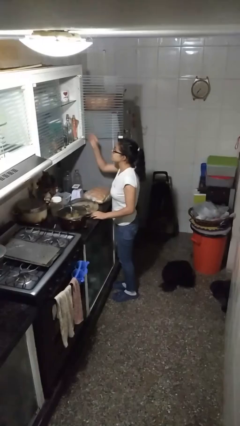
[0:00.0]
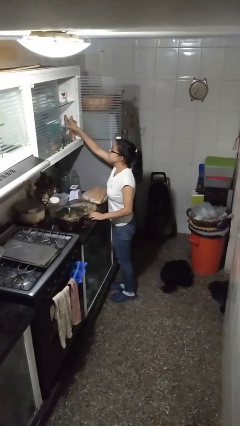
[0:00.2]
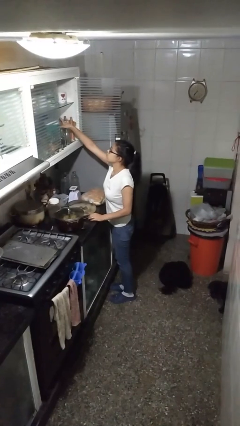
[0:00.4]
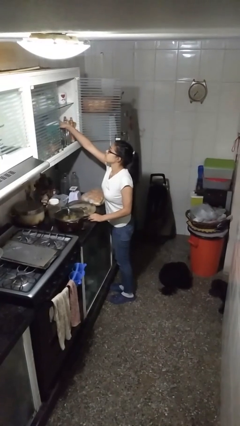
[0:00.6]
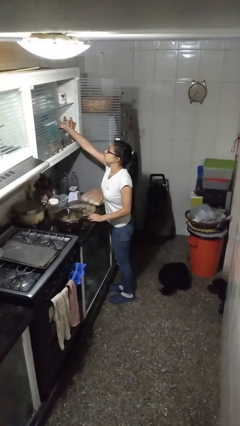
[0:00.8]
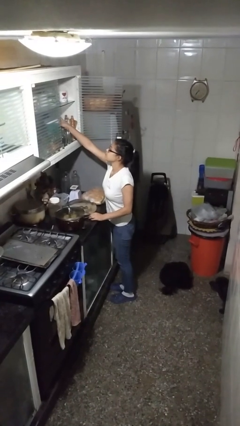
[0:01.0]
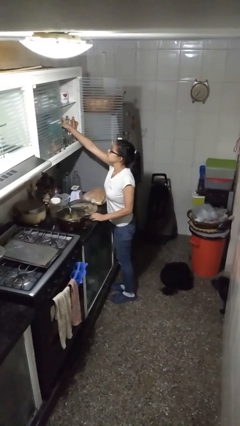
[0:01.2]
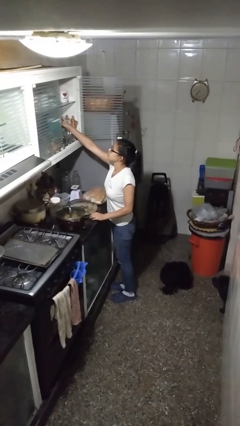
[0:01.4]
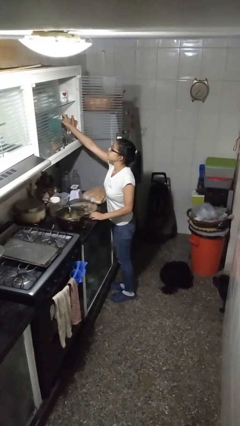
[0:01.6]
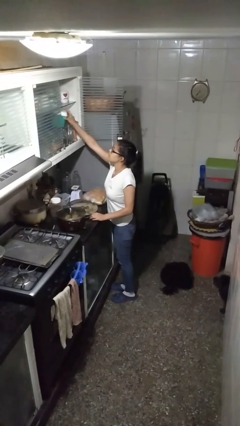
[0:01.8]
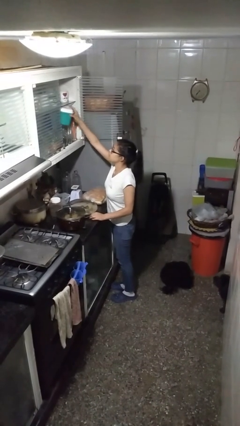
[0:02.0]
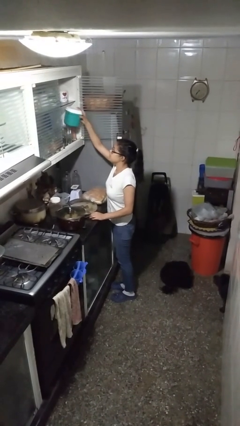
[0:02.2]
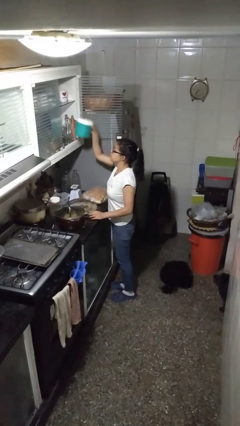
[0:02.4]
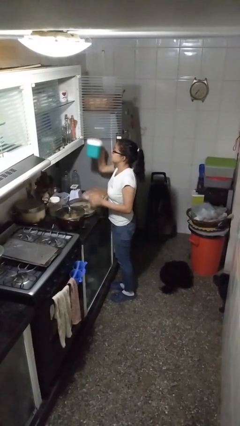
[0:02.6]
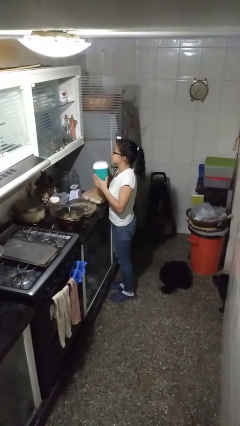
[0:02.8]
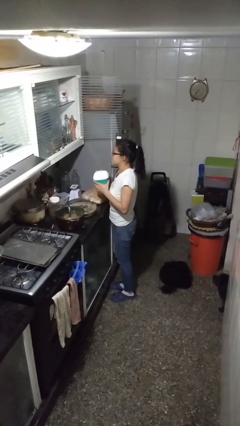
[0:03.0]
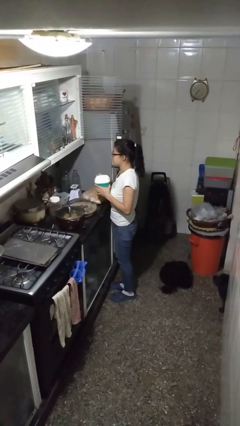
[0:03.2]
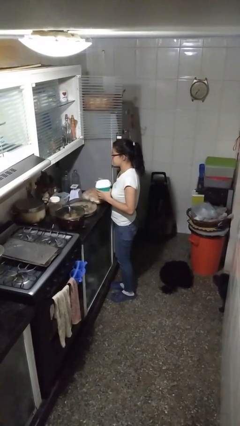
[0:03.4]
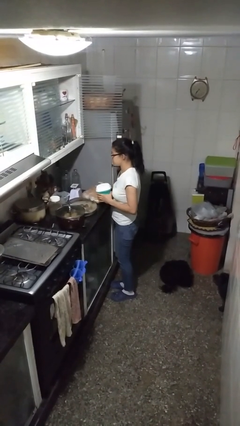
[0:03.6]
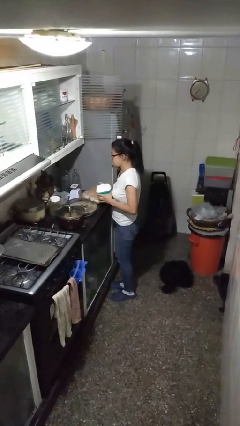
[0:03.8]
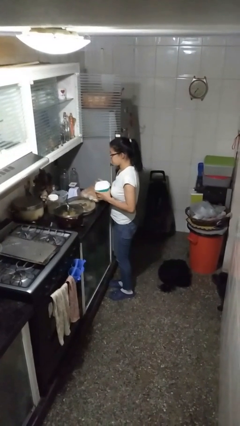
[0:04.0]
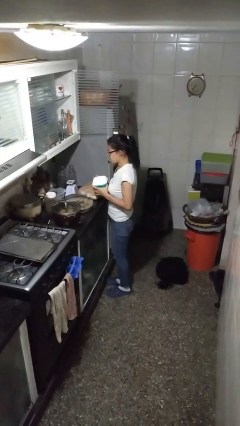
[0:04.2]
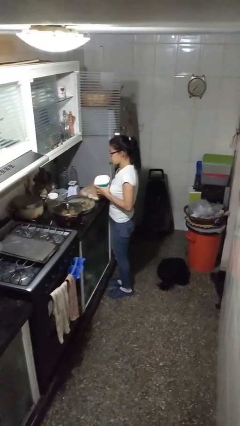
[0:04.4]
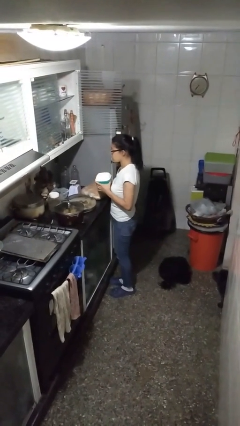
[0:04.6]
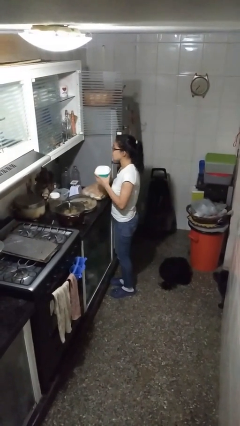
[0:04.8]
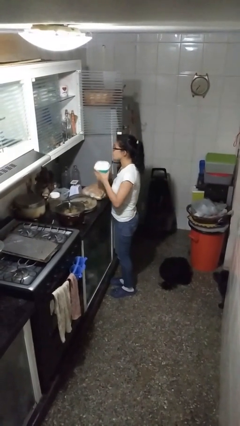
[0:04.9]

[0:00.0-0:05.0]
person picks up object from cabinet

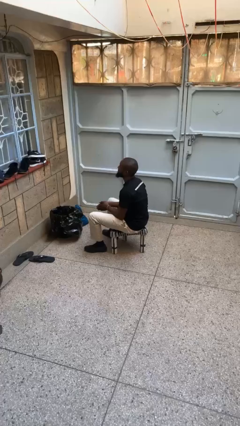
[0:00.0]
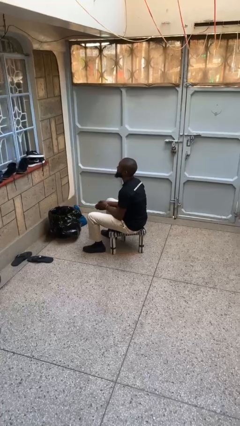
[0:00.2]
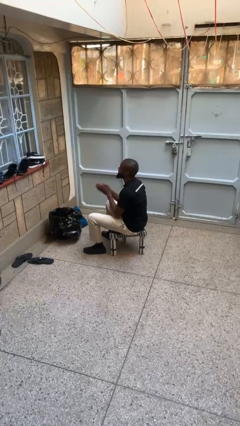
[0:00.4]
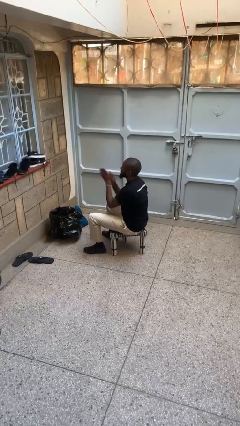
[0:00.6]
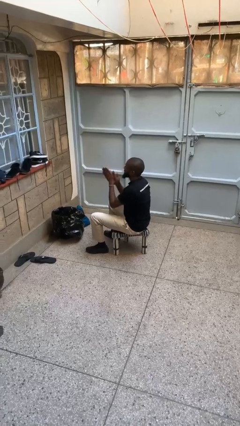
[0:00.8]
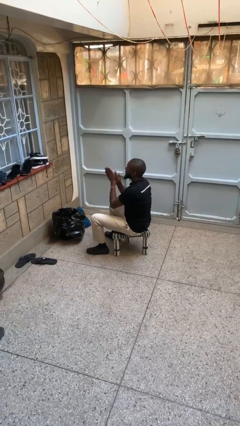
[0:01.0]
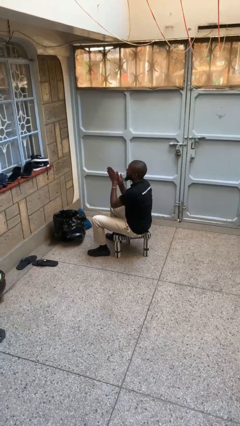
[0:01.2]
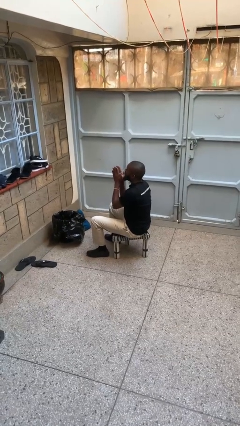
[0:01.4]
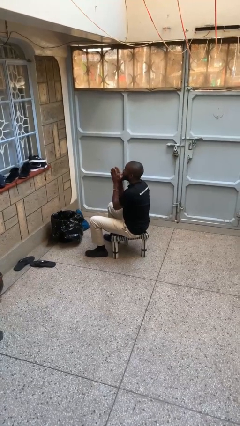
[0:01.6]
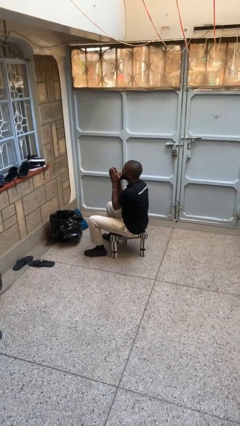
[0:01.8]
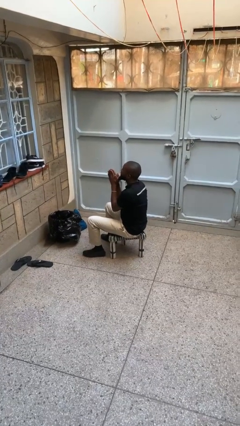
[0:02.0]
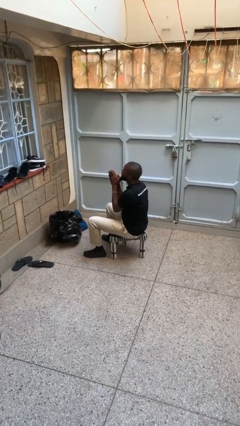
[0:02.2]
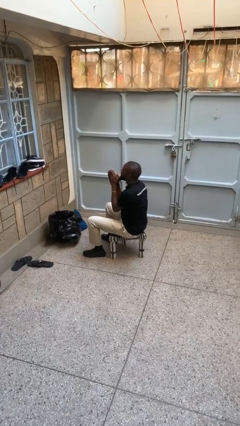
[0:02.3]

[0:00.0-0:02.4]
person blows into hands

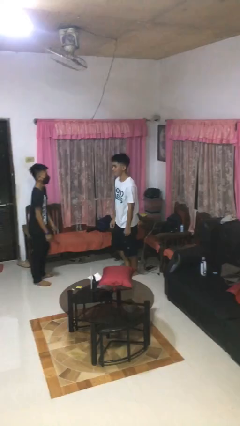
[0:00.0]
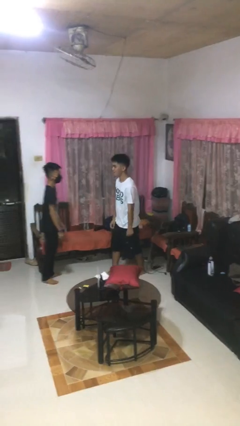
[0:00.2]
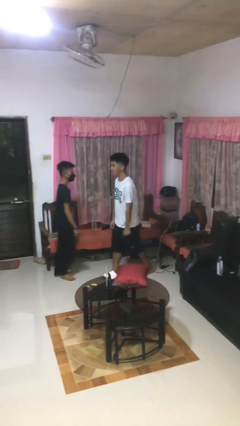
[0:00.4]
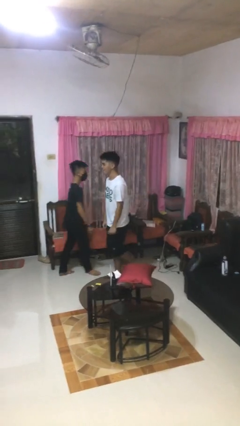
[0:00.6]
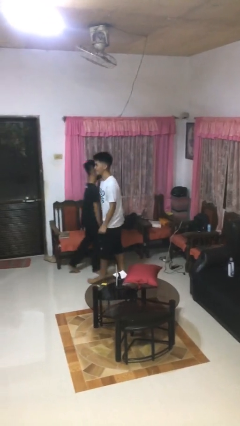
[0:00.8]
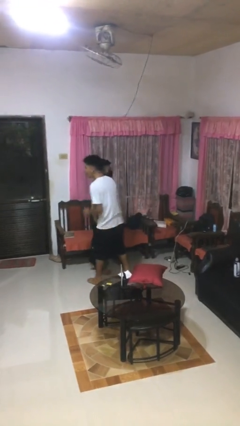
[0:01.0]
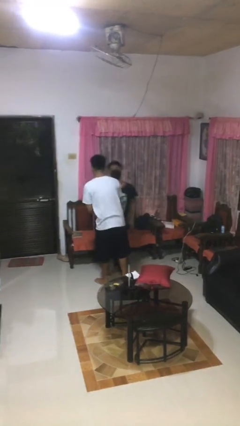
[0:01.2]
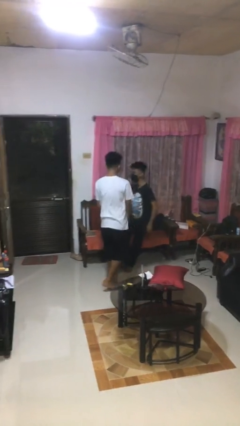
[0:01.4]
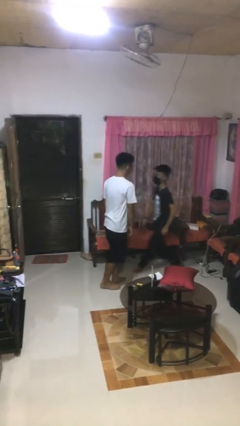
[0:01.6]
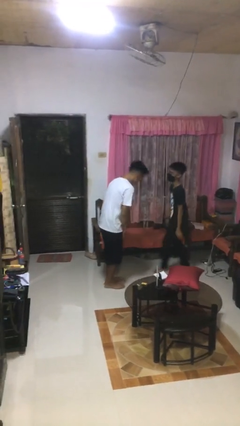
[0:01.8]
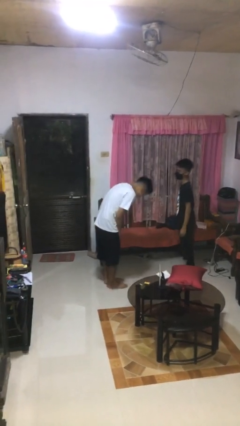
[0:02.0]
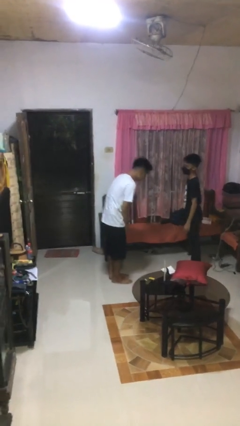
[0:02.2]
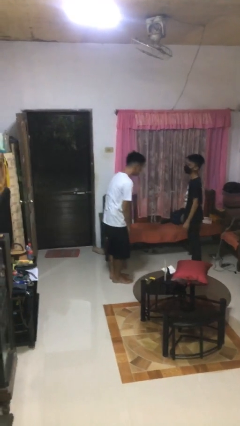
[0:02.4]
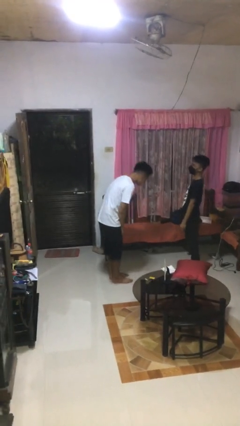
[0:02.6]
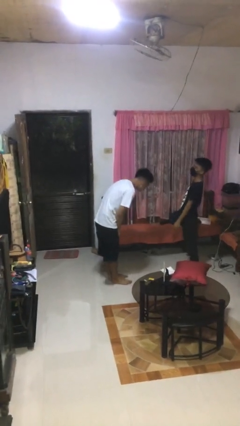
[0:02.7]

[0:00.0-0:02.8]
person bumps into person

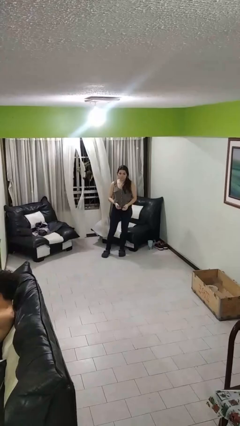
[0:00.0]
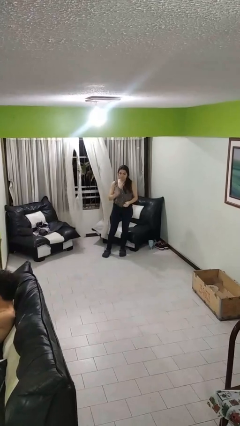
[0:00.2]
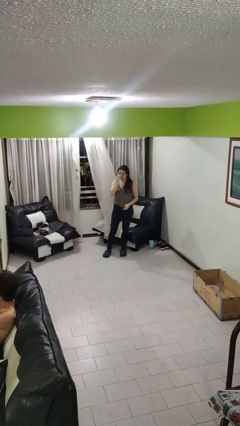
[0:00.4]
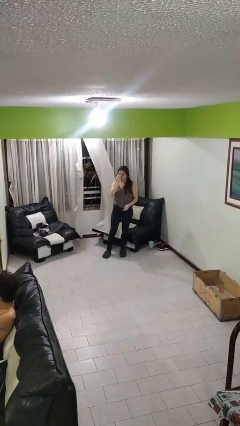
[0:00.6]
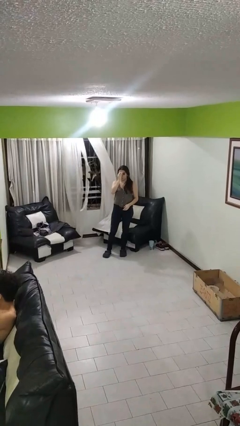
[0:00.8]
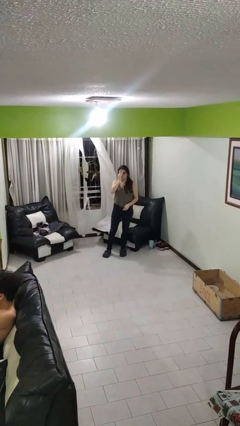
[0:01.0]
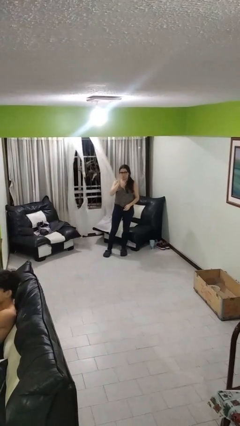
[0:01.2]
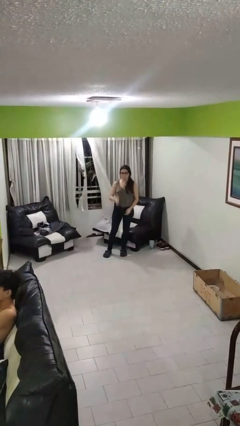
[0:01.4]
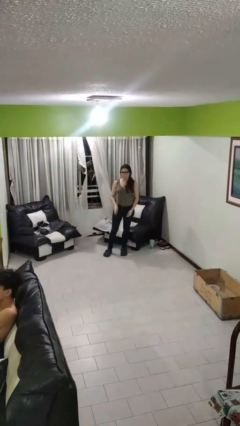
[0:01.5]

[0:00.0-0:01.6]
person puts on glasses

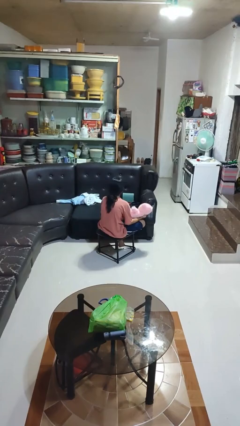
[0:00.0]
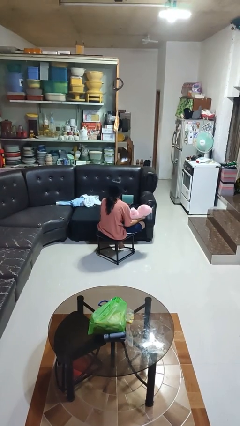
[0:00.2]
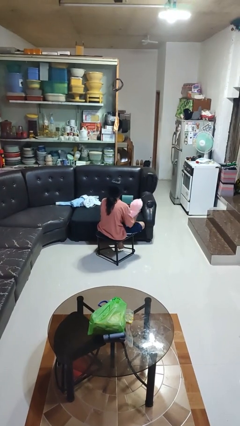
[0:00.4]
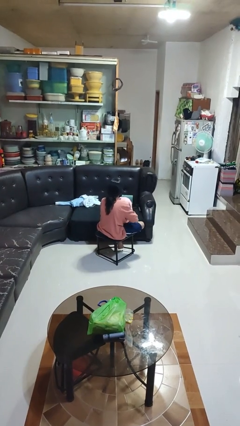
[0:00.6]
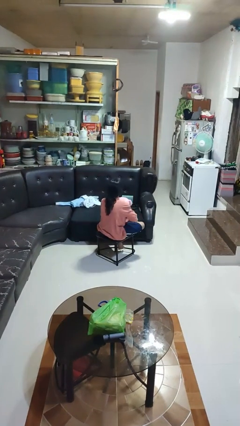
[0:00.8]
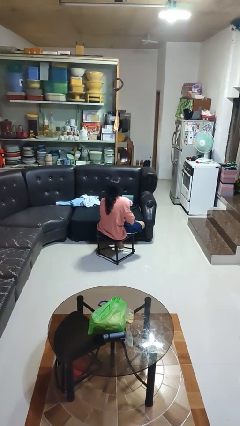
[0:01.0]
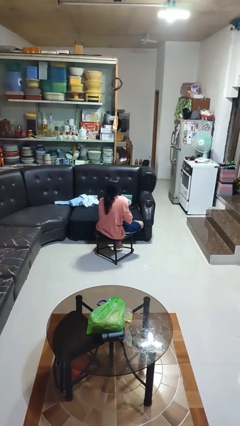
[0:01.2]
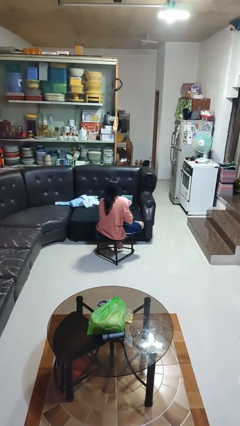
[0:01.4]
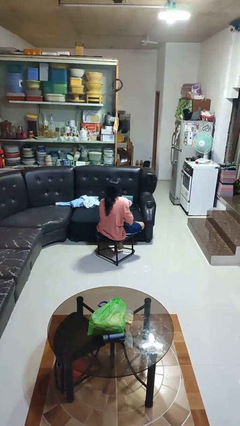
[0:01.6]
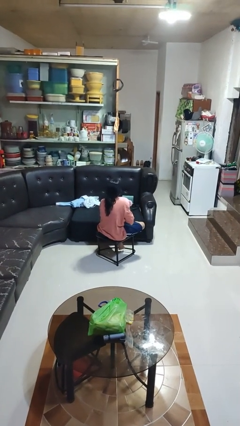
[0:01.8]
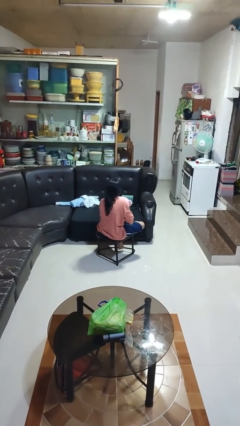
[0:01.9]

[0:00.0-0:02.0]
person hugs stuffed animal

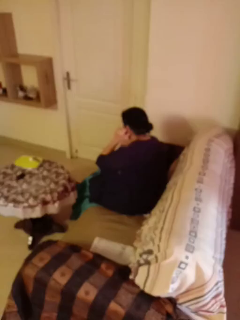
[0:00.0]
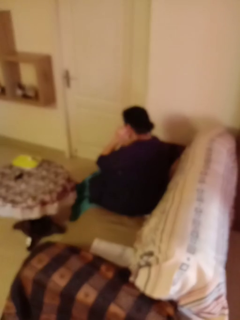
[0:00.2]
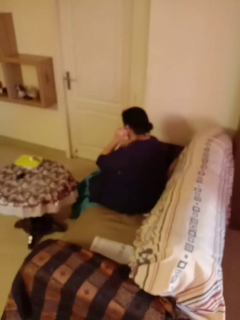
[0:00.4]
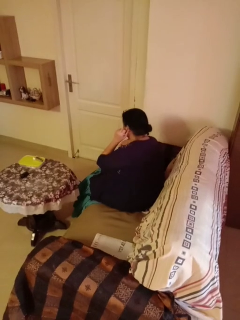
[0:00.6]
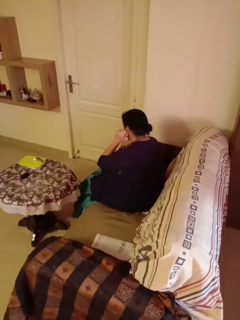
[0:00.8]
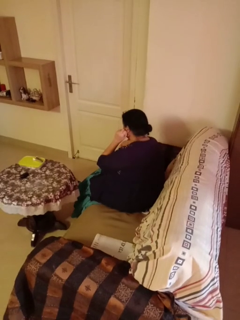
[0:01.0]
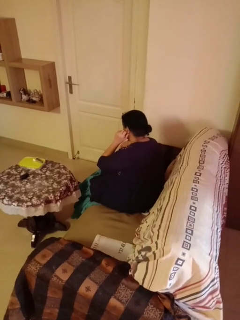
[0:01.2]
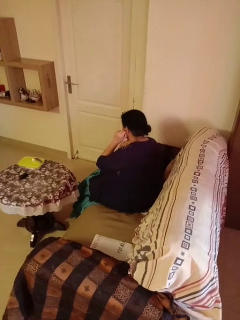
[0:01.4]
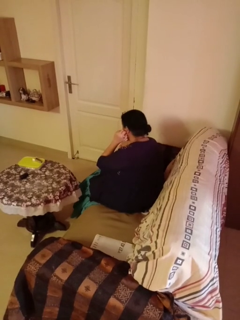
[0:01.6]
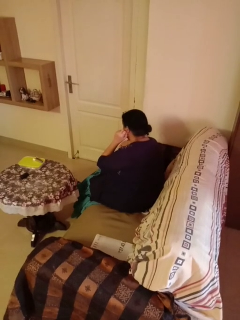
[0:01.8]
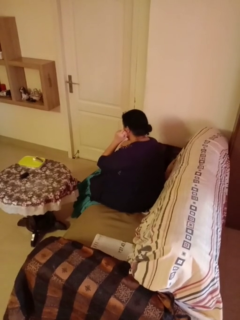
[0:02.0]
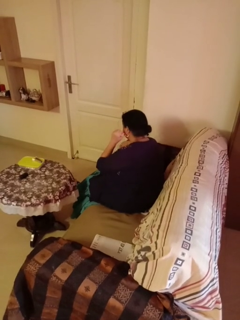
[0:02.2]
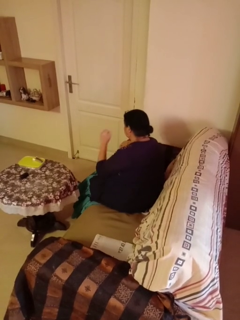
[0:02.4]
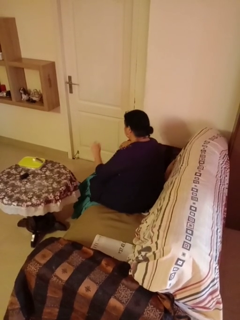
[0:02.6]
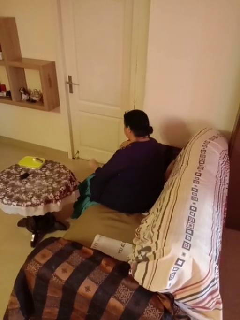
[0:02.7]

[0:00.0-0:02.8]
person touches earlobe

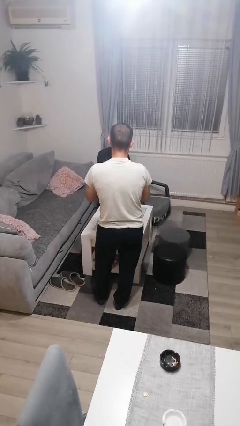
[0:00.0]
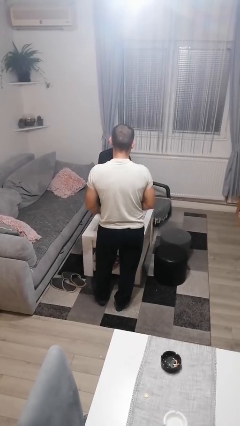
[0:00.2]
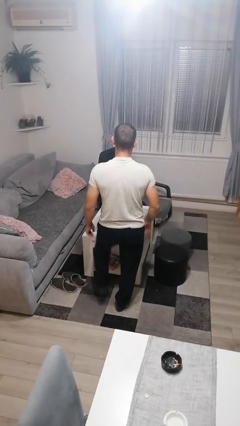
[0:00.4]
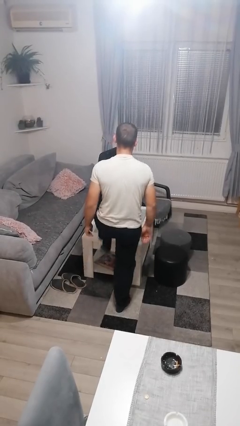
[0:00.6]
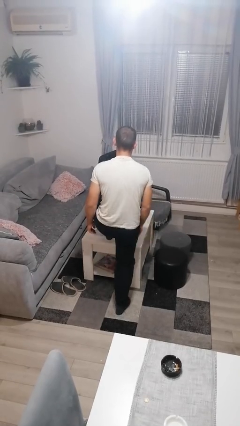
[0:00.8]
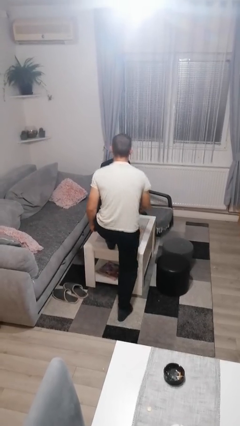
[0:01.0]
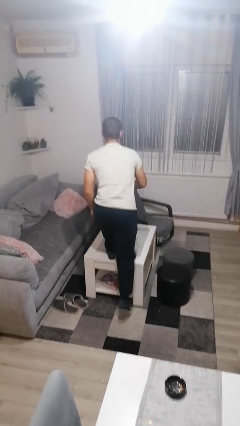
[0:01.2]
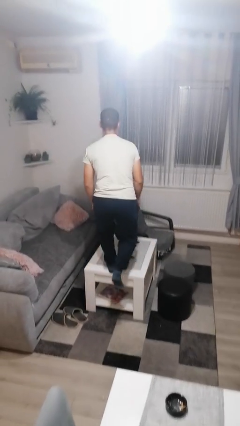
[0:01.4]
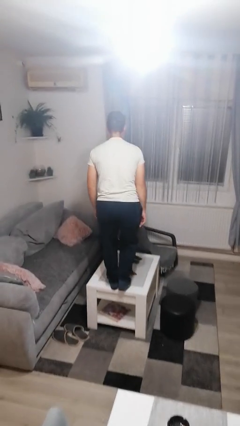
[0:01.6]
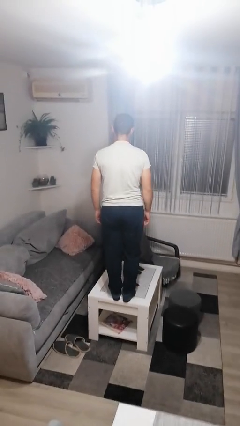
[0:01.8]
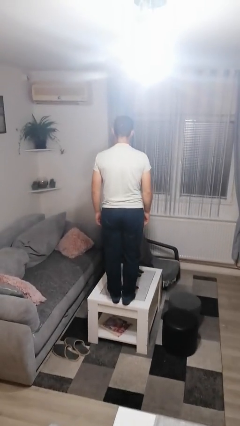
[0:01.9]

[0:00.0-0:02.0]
person climbs on table
